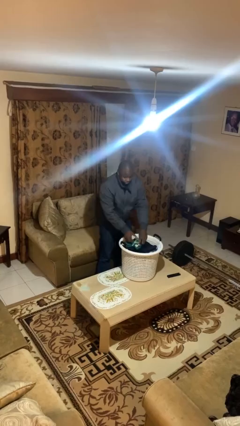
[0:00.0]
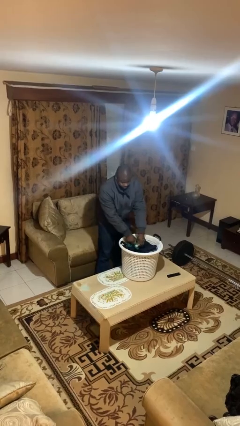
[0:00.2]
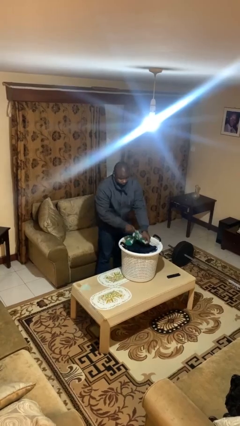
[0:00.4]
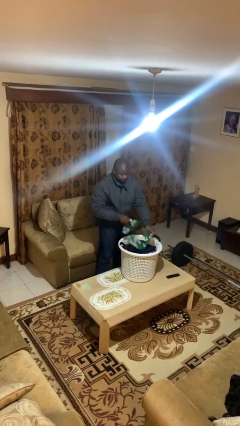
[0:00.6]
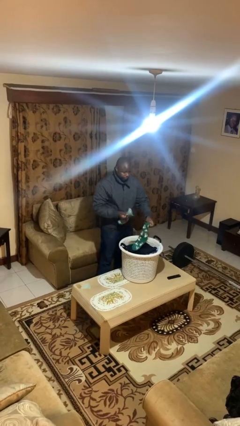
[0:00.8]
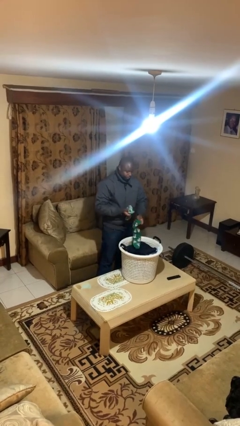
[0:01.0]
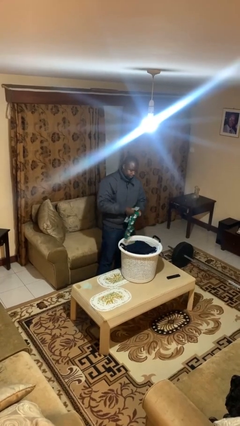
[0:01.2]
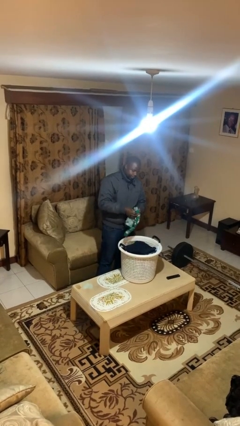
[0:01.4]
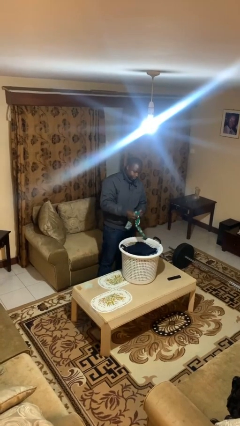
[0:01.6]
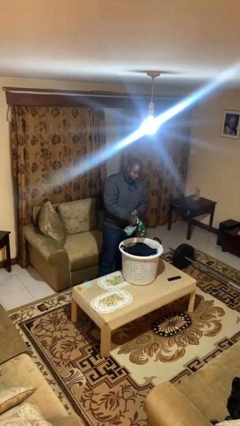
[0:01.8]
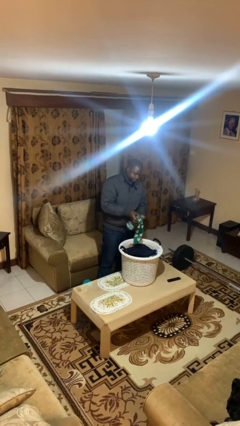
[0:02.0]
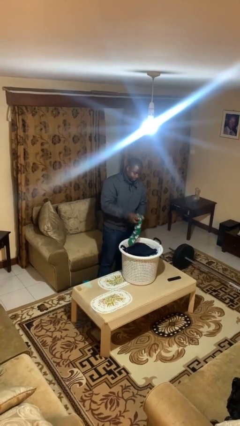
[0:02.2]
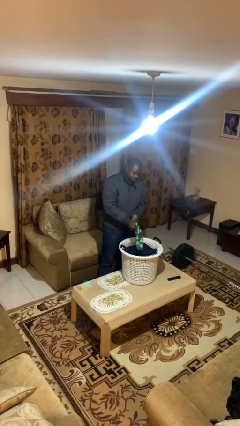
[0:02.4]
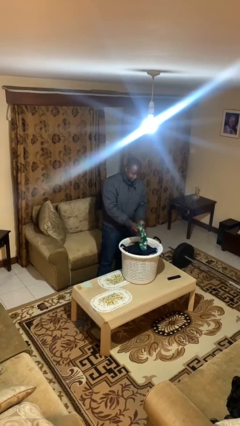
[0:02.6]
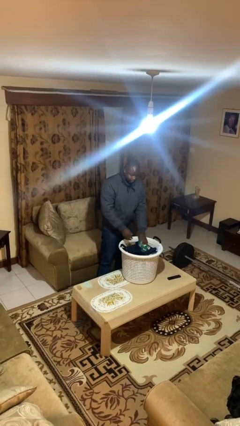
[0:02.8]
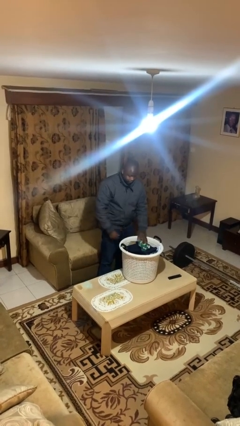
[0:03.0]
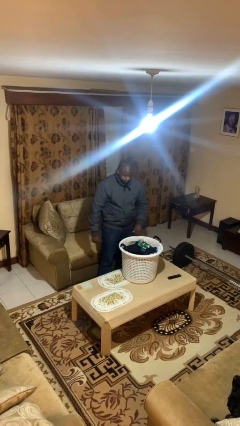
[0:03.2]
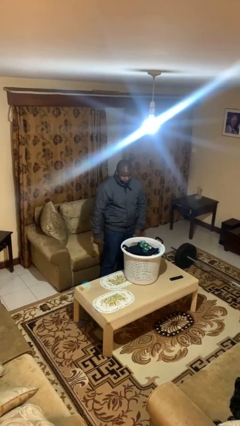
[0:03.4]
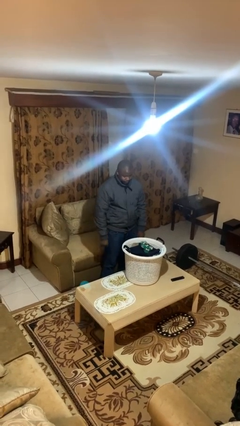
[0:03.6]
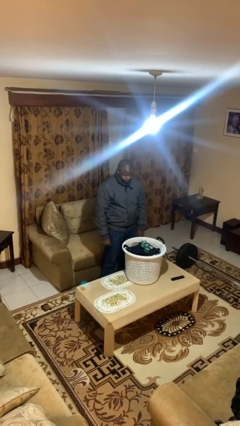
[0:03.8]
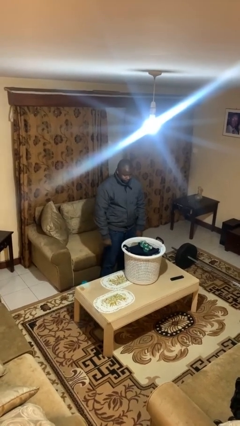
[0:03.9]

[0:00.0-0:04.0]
person folds socks

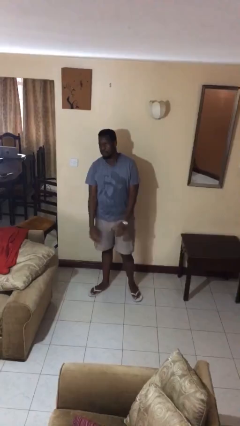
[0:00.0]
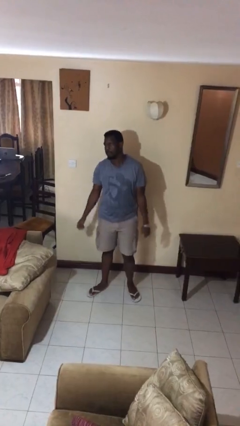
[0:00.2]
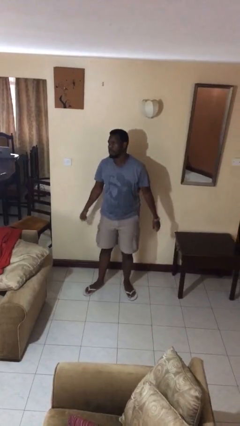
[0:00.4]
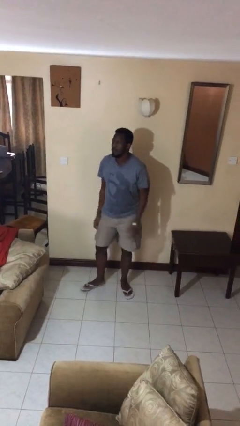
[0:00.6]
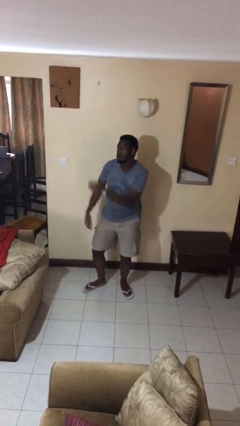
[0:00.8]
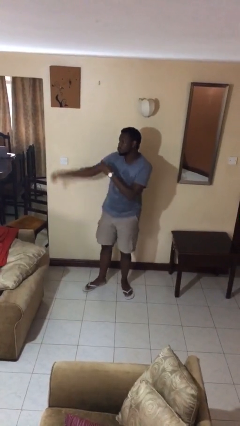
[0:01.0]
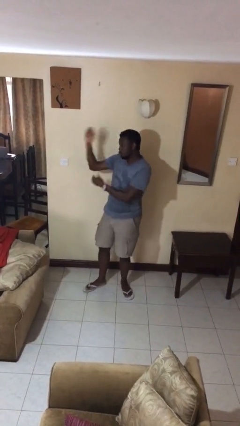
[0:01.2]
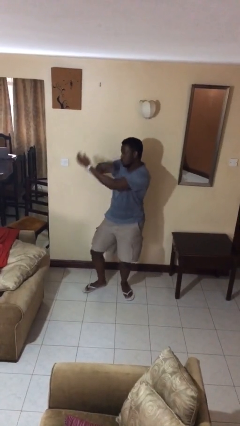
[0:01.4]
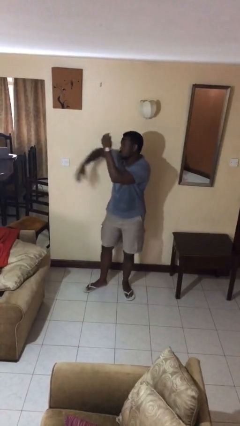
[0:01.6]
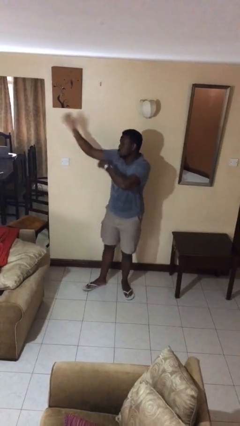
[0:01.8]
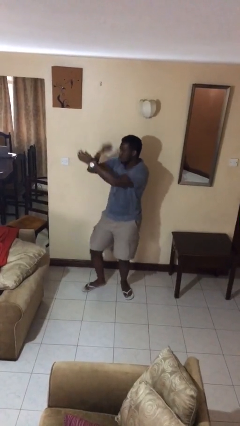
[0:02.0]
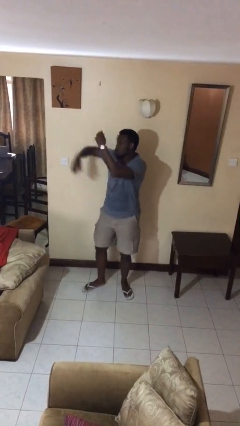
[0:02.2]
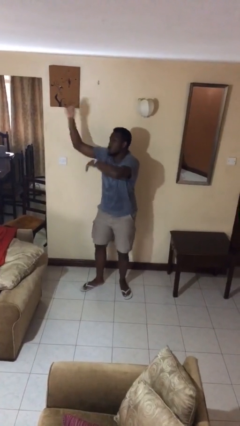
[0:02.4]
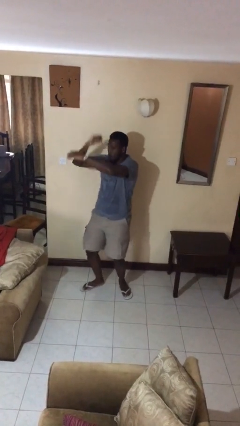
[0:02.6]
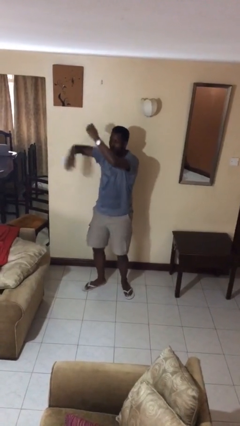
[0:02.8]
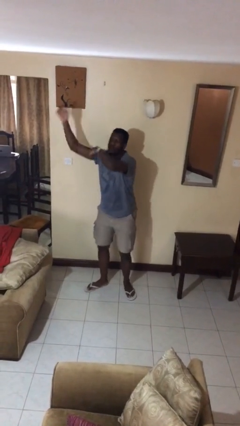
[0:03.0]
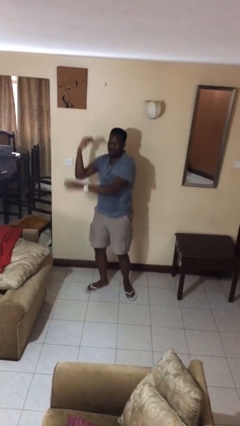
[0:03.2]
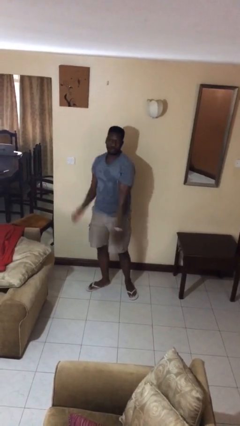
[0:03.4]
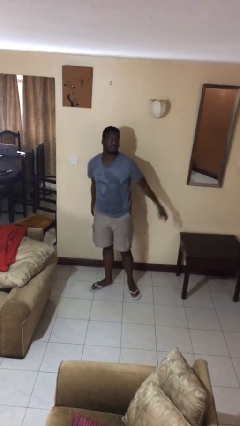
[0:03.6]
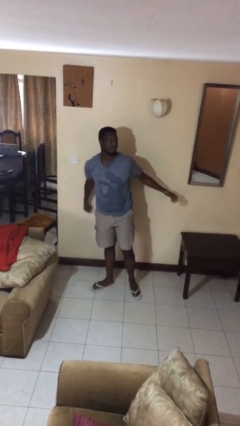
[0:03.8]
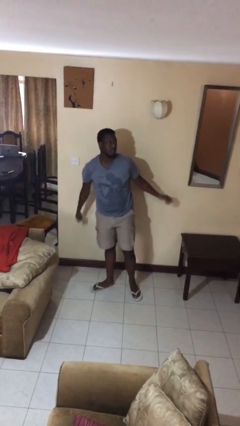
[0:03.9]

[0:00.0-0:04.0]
person dances in place

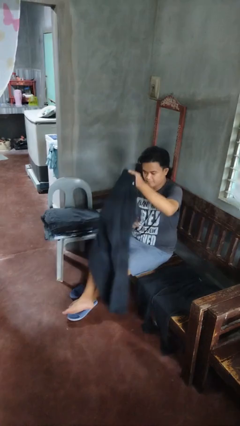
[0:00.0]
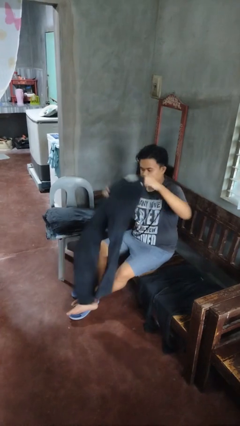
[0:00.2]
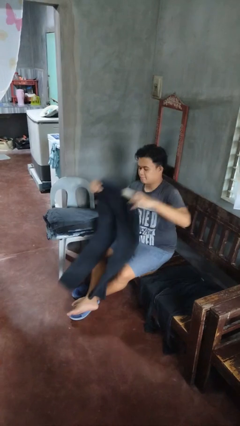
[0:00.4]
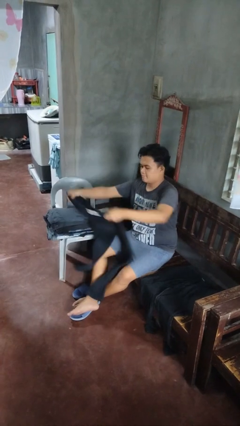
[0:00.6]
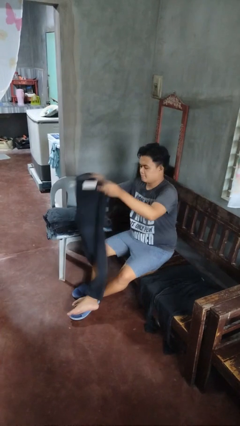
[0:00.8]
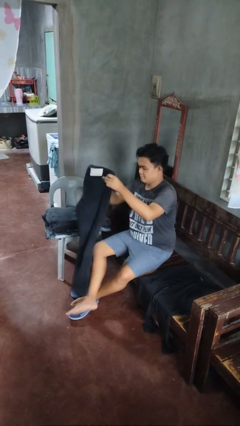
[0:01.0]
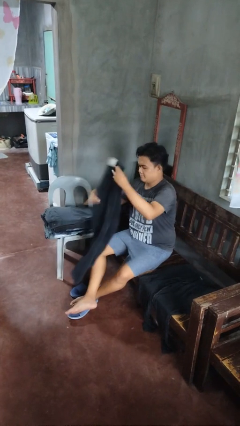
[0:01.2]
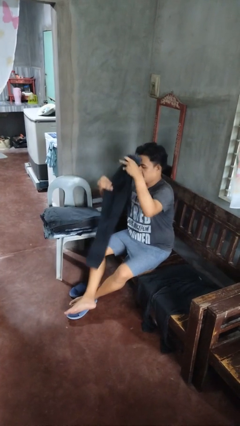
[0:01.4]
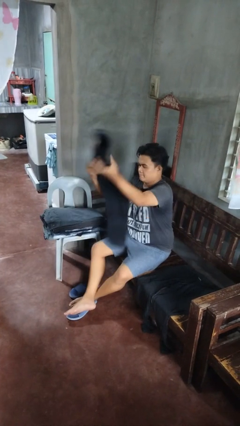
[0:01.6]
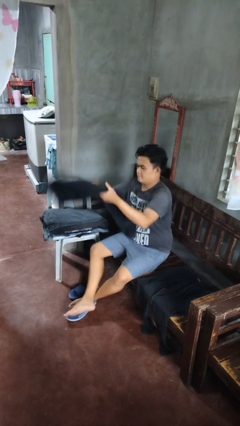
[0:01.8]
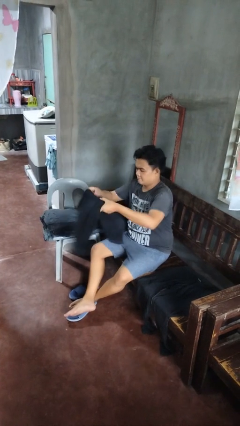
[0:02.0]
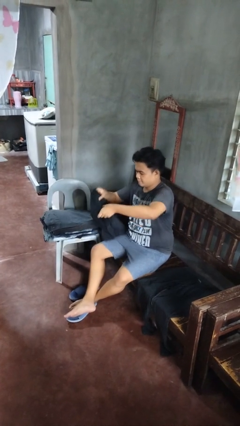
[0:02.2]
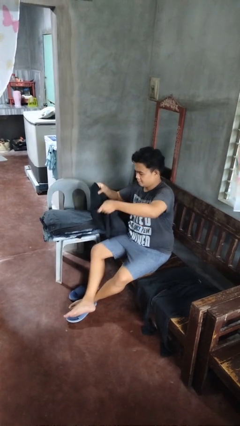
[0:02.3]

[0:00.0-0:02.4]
person folds pants

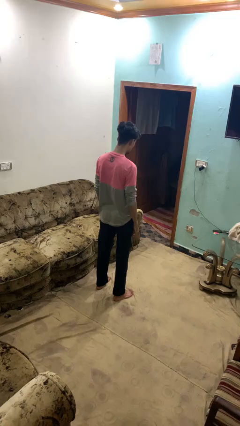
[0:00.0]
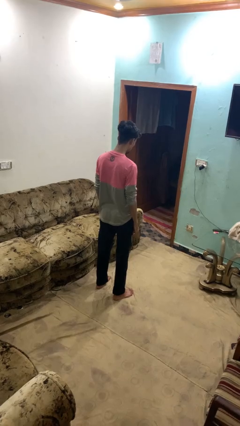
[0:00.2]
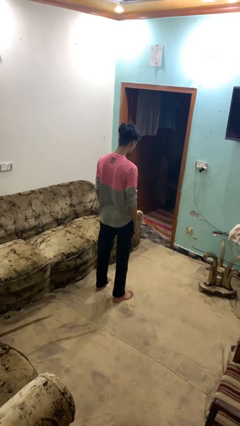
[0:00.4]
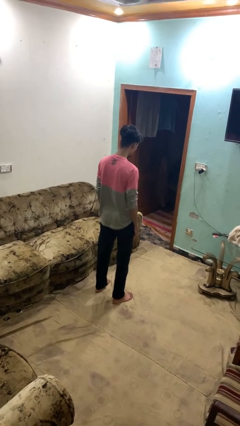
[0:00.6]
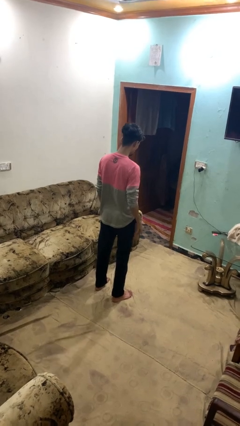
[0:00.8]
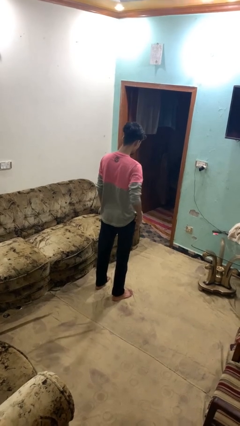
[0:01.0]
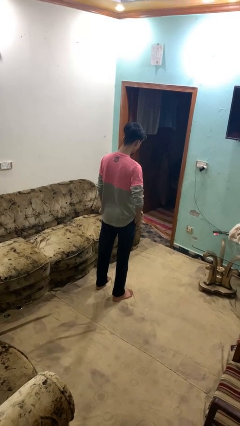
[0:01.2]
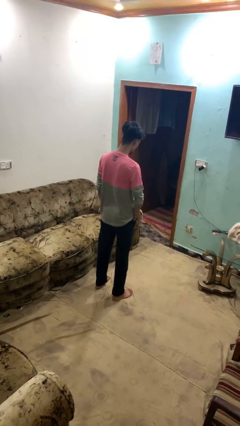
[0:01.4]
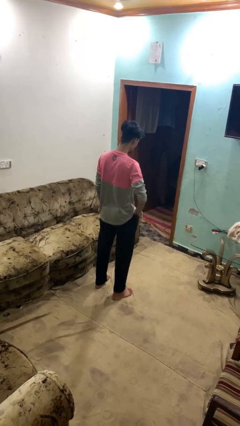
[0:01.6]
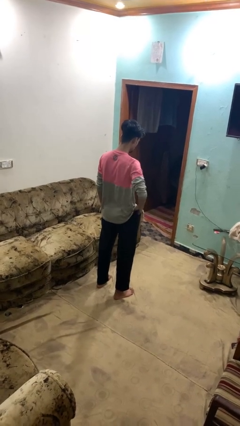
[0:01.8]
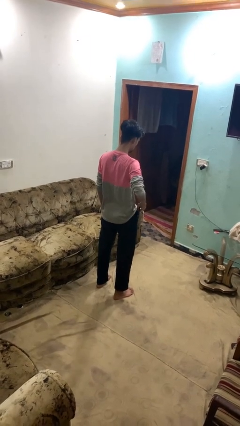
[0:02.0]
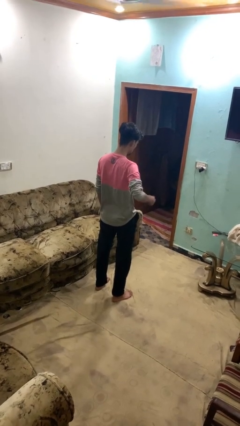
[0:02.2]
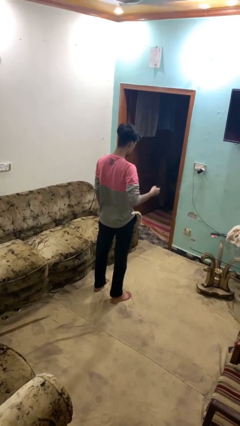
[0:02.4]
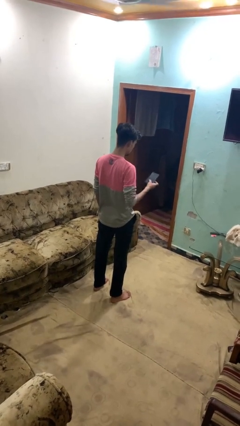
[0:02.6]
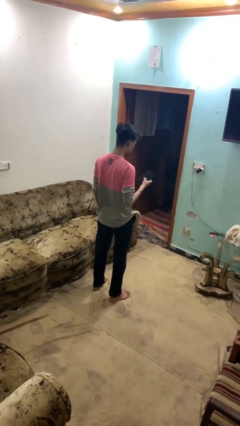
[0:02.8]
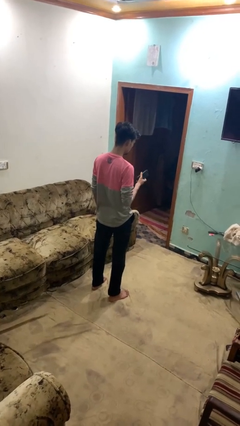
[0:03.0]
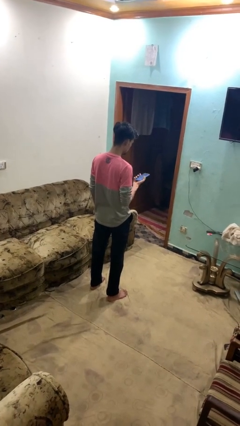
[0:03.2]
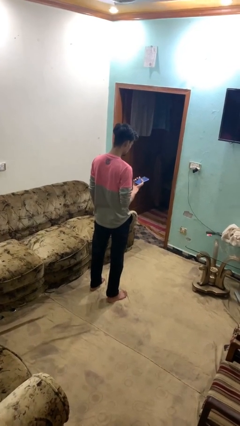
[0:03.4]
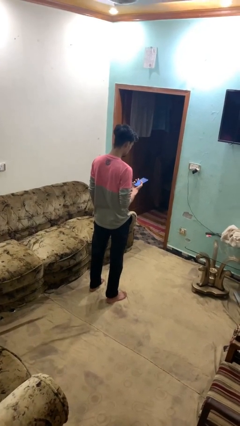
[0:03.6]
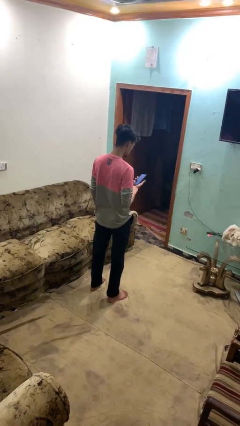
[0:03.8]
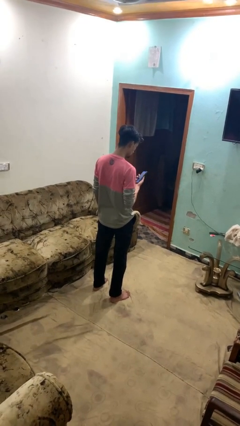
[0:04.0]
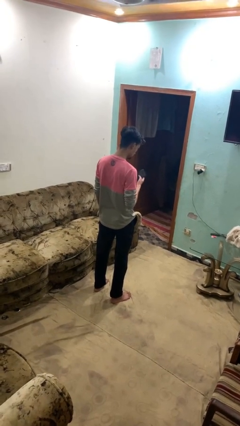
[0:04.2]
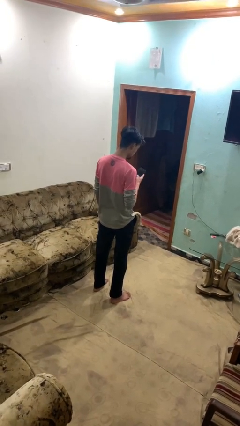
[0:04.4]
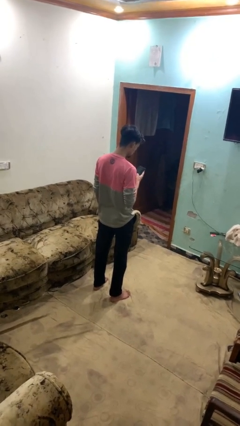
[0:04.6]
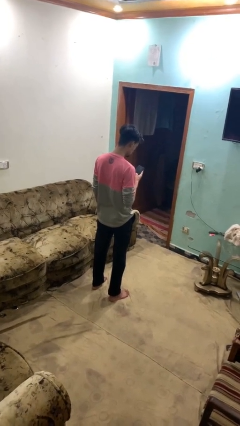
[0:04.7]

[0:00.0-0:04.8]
person takes phone from pocket

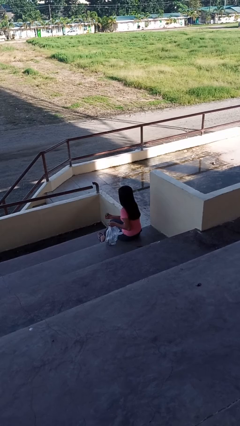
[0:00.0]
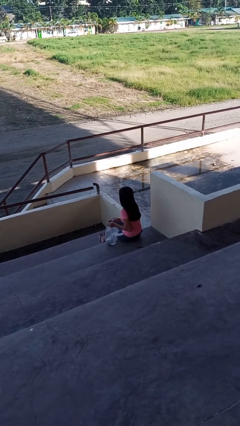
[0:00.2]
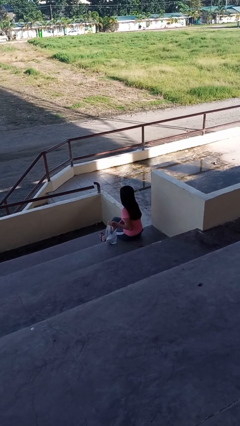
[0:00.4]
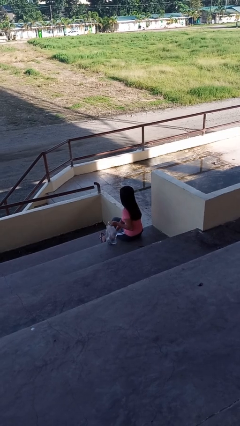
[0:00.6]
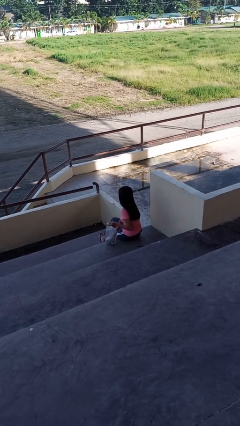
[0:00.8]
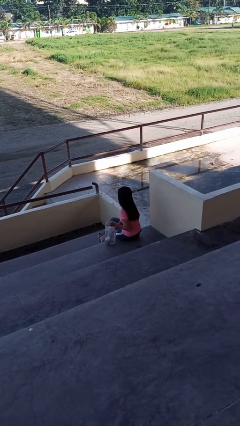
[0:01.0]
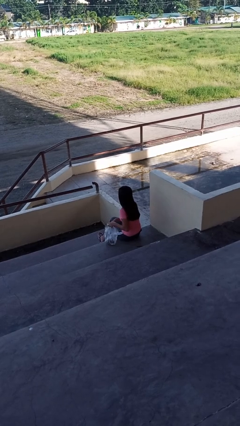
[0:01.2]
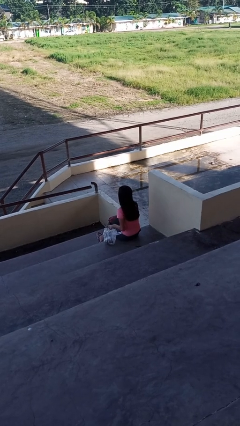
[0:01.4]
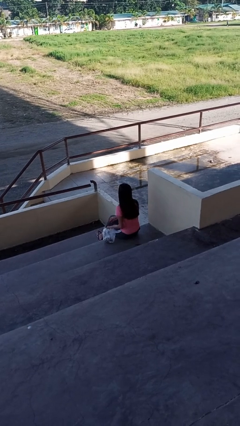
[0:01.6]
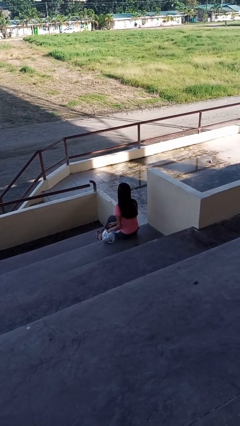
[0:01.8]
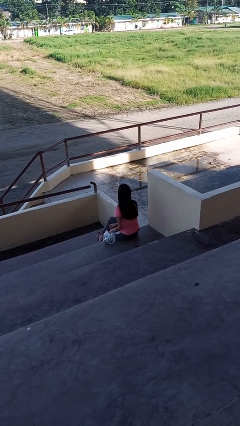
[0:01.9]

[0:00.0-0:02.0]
person puts object into bag

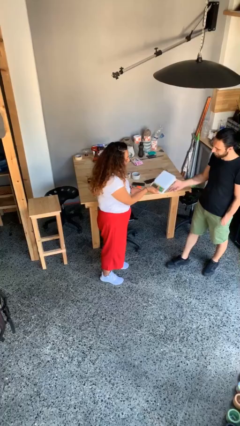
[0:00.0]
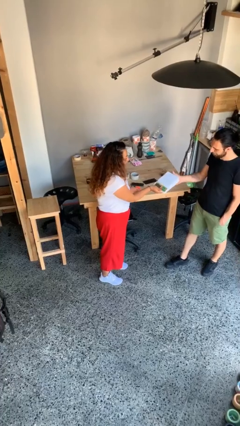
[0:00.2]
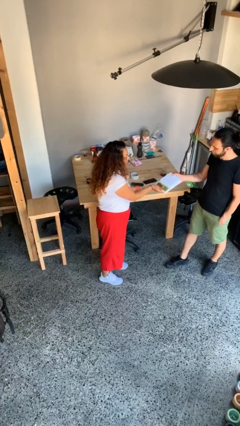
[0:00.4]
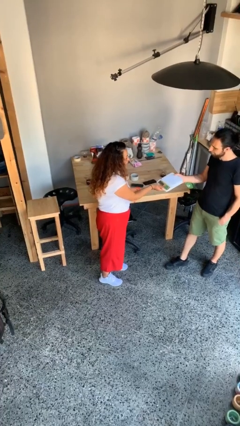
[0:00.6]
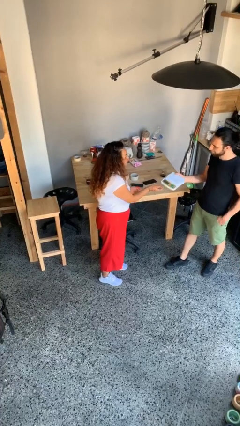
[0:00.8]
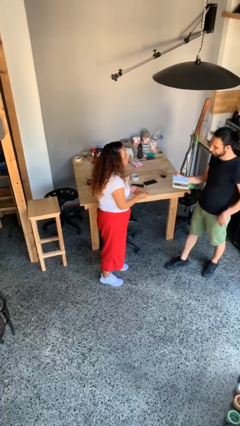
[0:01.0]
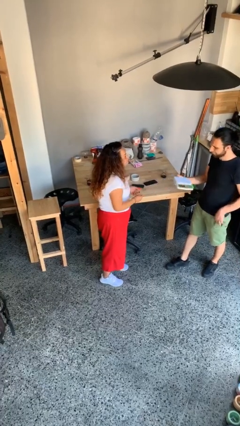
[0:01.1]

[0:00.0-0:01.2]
person transfers object to person
